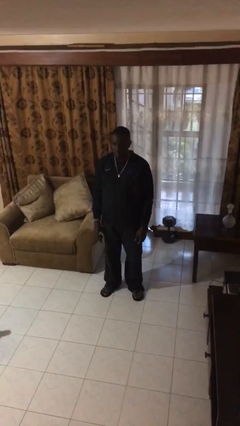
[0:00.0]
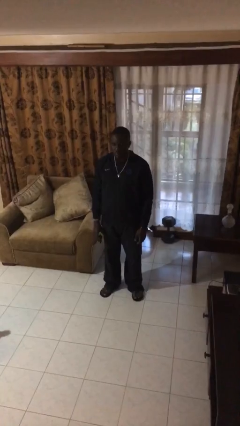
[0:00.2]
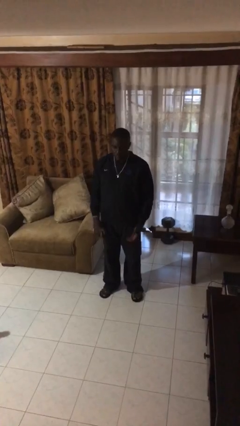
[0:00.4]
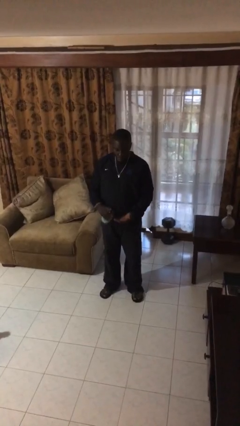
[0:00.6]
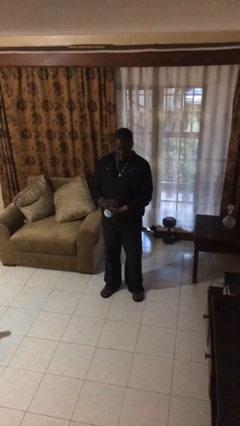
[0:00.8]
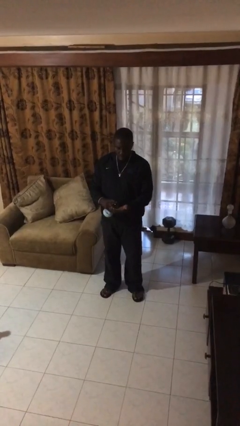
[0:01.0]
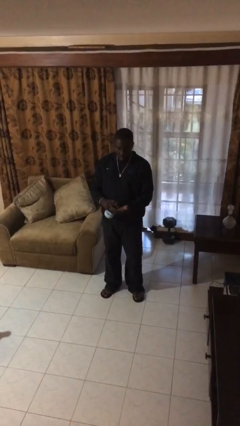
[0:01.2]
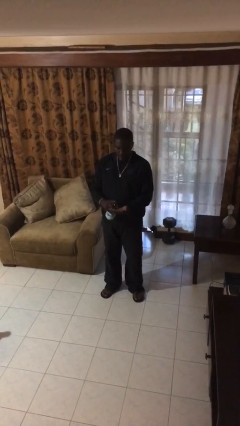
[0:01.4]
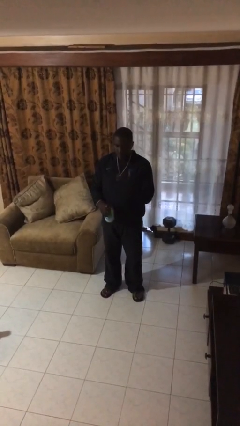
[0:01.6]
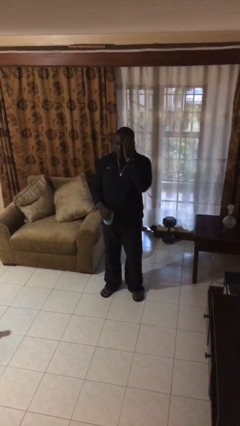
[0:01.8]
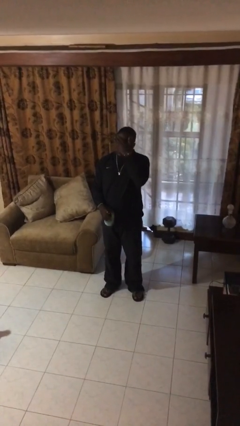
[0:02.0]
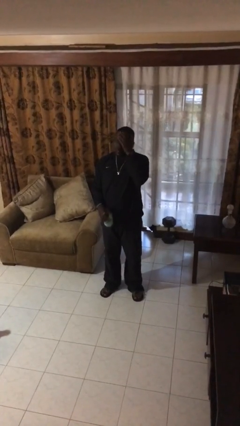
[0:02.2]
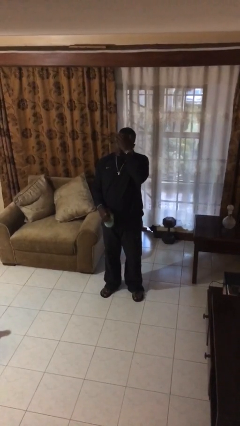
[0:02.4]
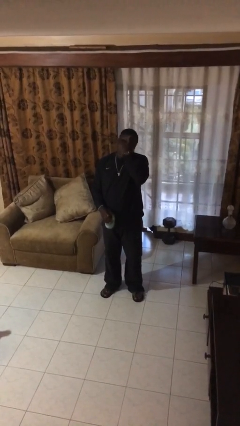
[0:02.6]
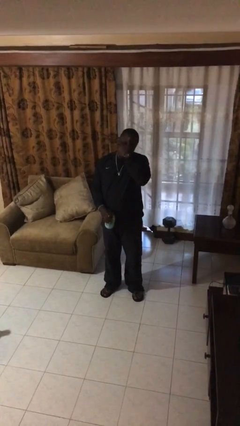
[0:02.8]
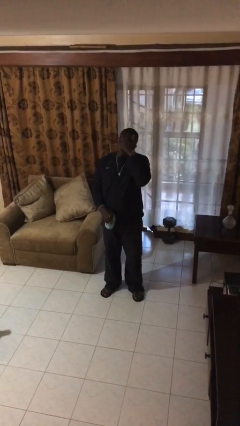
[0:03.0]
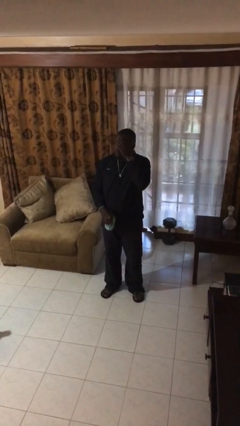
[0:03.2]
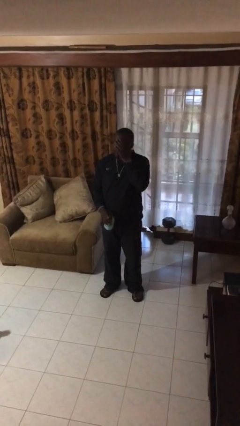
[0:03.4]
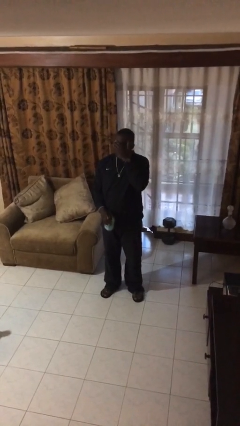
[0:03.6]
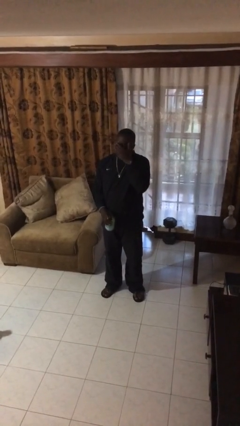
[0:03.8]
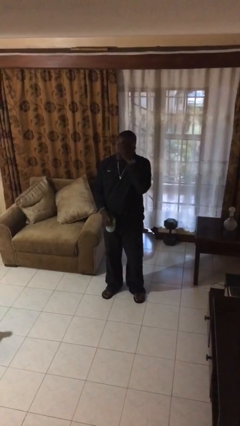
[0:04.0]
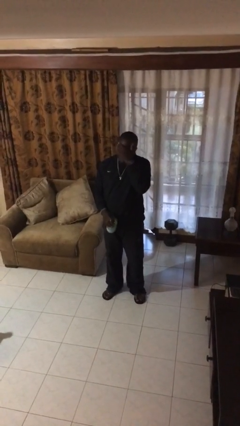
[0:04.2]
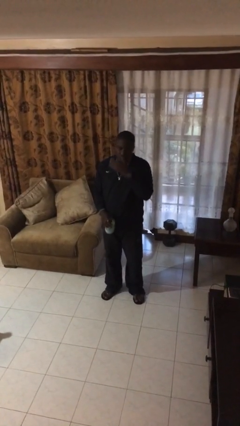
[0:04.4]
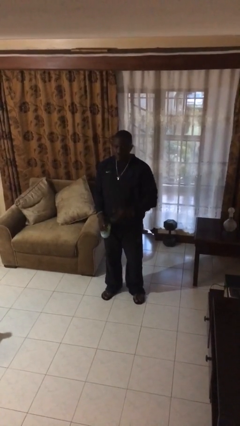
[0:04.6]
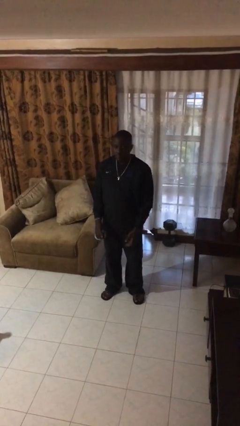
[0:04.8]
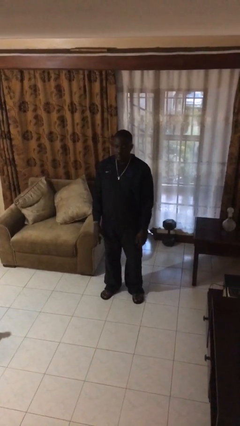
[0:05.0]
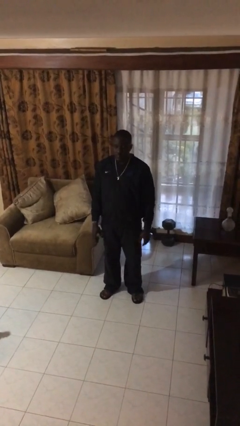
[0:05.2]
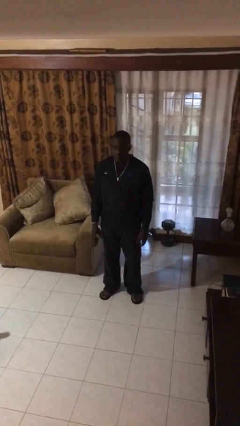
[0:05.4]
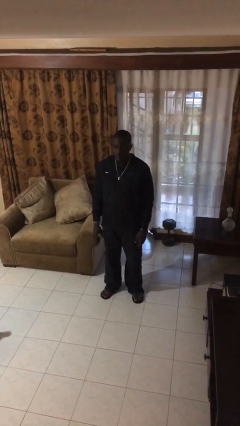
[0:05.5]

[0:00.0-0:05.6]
person applies facial moisturizer

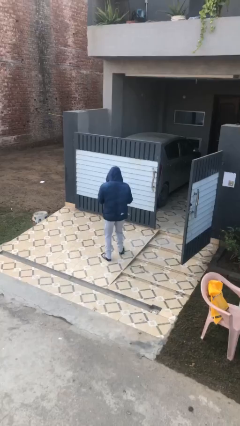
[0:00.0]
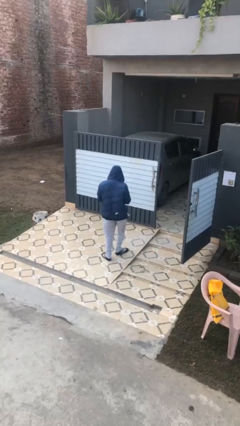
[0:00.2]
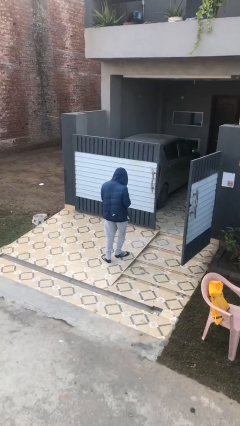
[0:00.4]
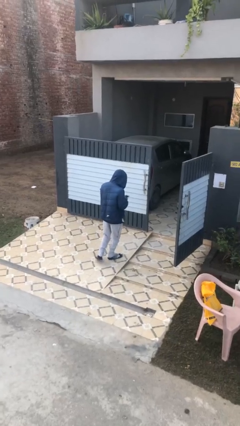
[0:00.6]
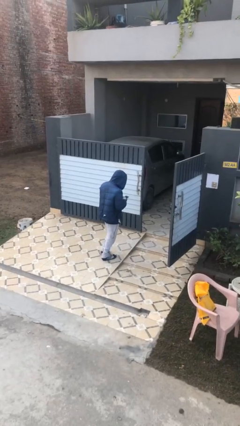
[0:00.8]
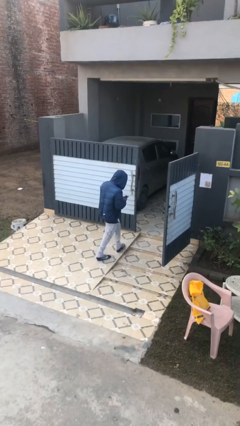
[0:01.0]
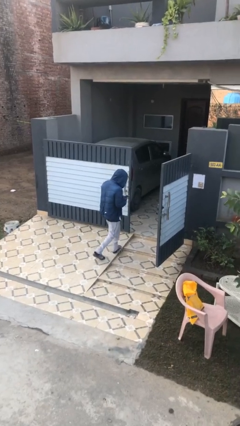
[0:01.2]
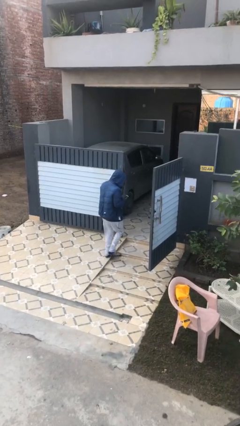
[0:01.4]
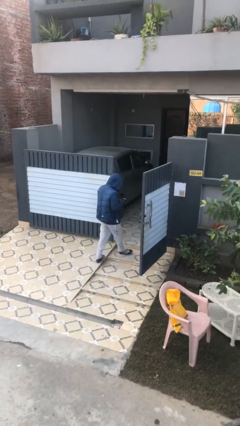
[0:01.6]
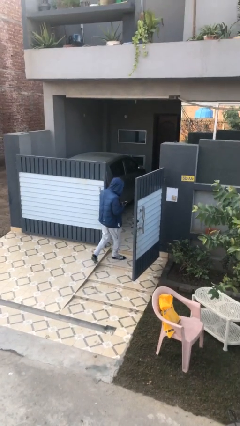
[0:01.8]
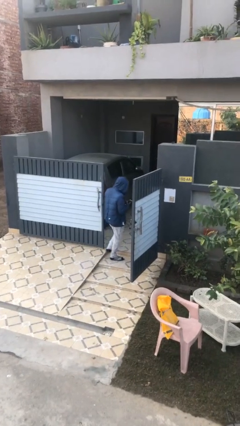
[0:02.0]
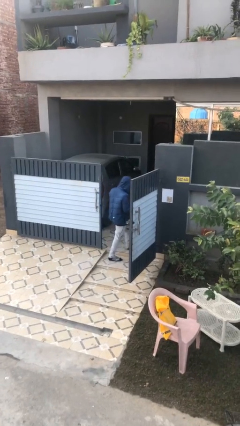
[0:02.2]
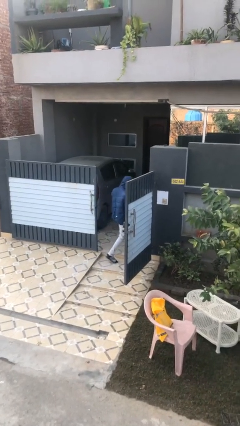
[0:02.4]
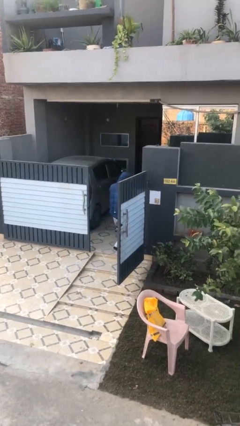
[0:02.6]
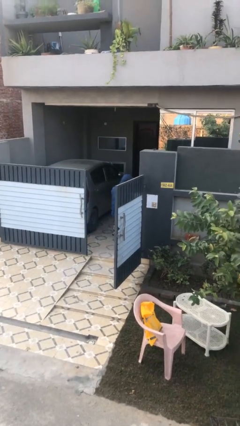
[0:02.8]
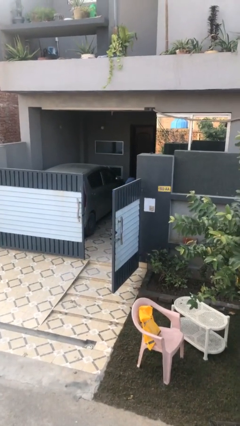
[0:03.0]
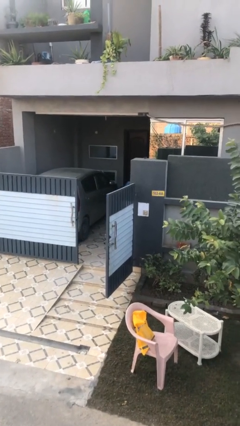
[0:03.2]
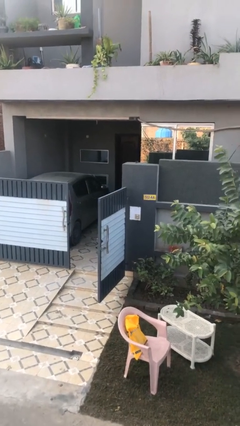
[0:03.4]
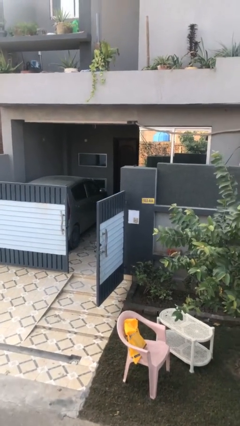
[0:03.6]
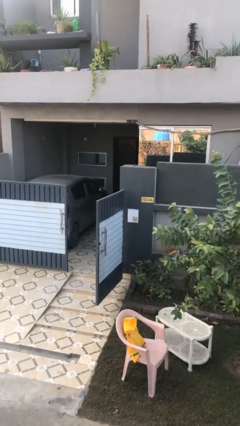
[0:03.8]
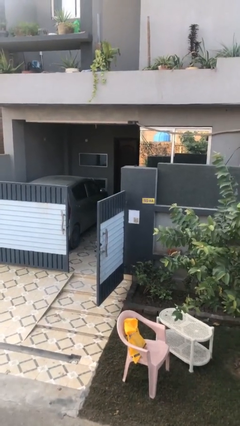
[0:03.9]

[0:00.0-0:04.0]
person exits scene through structure

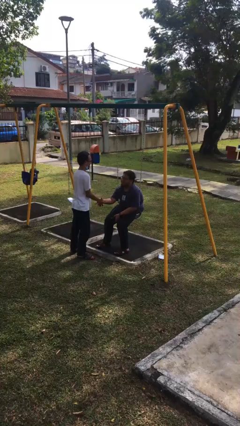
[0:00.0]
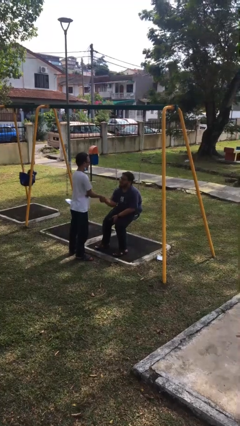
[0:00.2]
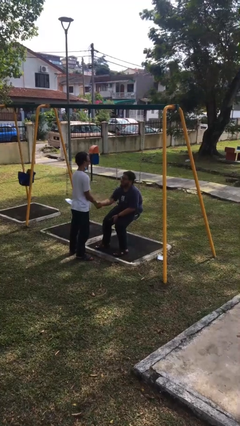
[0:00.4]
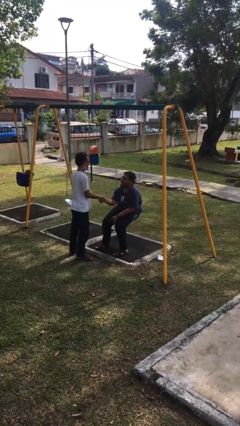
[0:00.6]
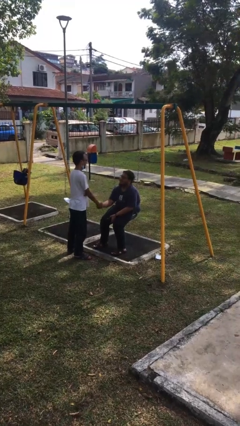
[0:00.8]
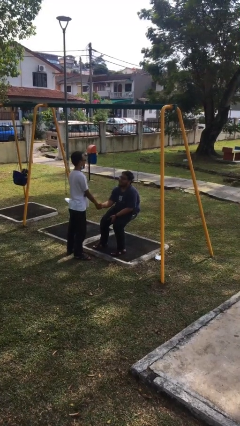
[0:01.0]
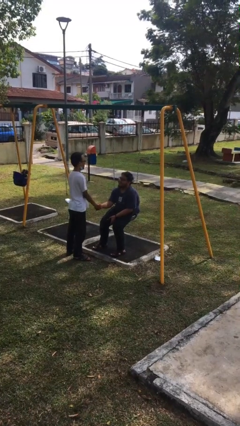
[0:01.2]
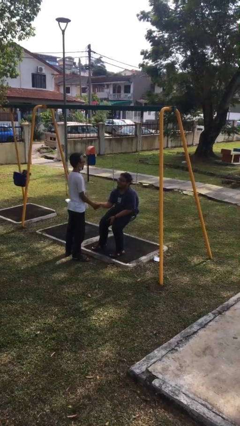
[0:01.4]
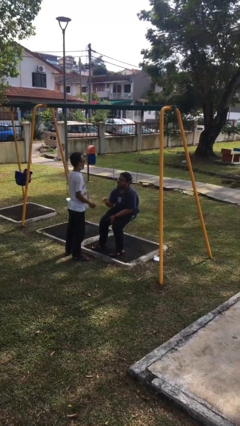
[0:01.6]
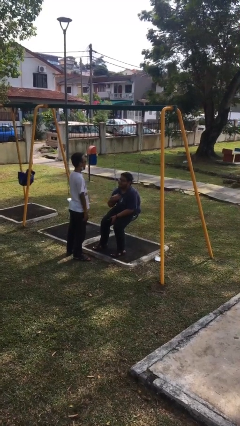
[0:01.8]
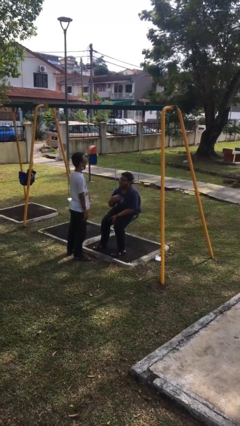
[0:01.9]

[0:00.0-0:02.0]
person shakes hand

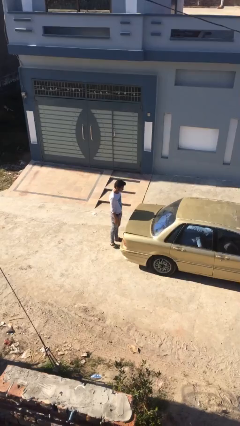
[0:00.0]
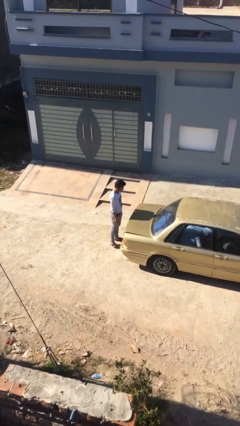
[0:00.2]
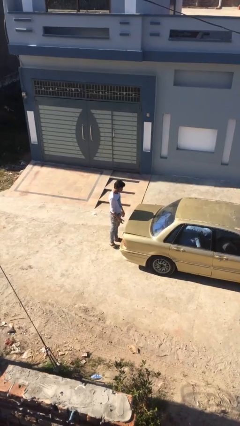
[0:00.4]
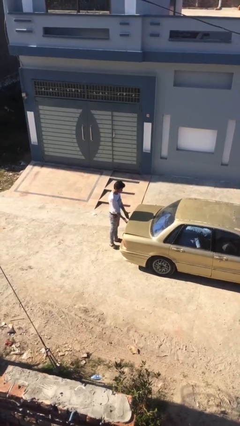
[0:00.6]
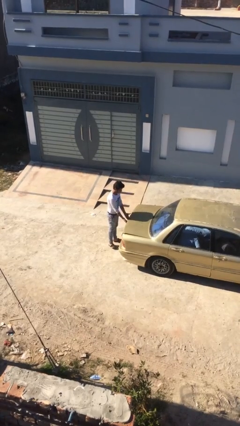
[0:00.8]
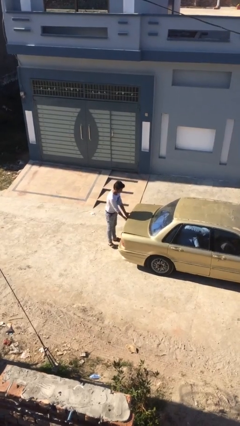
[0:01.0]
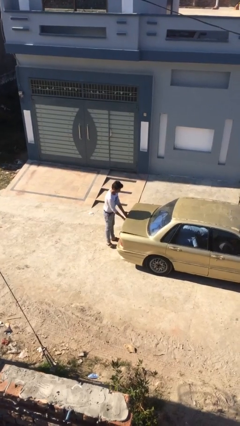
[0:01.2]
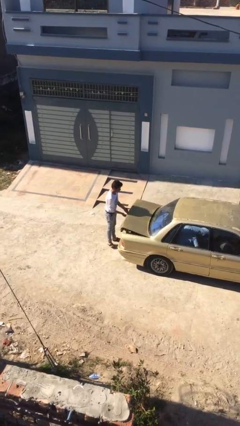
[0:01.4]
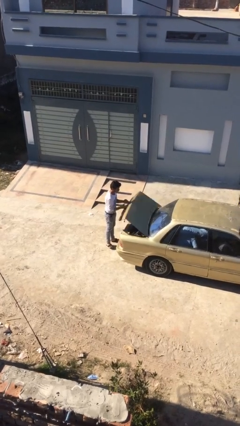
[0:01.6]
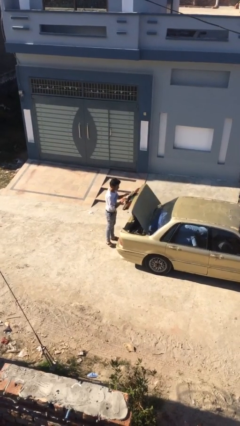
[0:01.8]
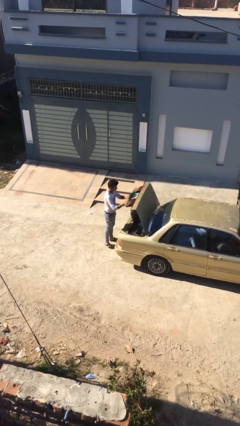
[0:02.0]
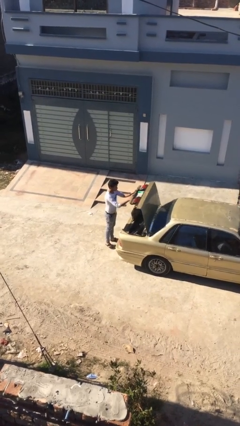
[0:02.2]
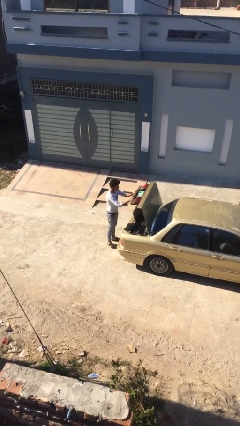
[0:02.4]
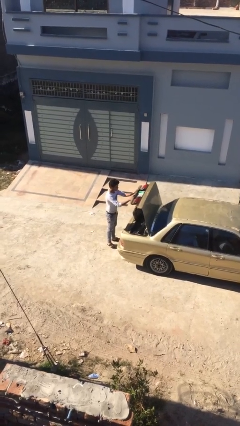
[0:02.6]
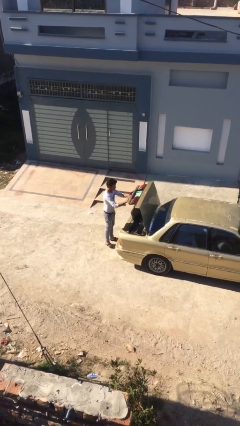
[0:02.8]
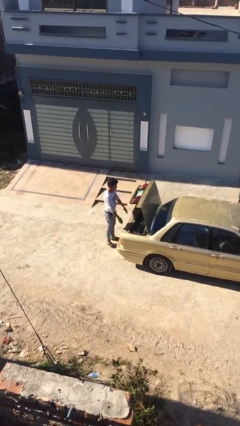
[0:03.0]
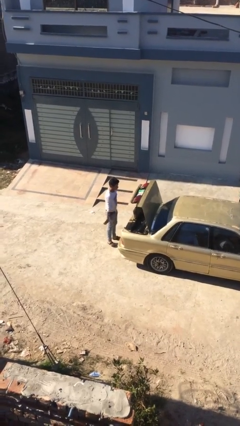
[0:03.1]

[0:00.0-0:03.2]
person opens car trunk

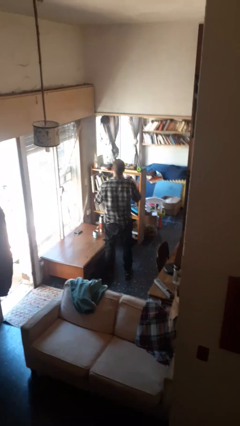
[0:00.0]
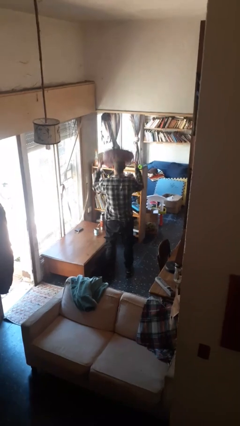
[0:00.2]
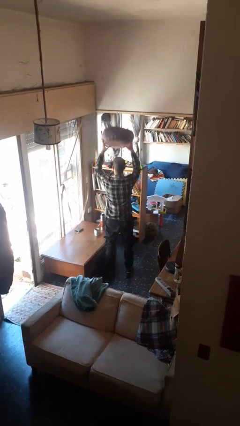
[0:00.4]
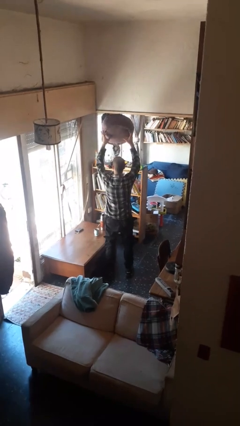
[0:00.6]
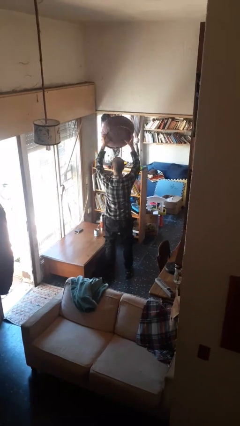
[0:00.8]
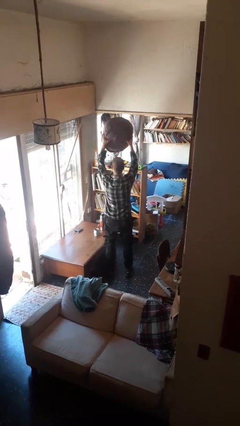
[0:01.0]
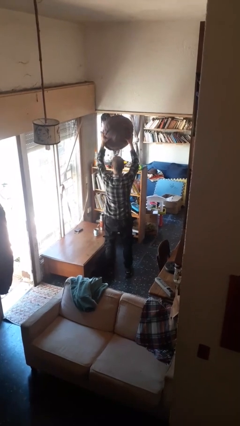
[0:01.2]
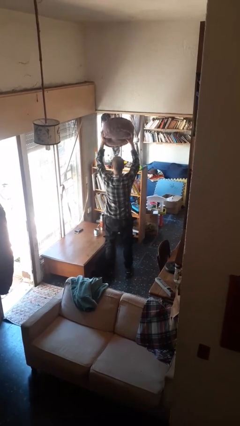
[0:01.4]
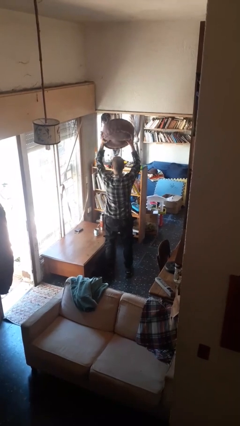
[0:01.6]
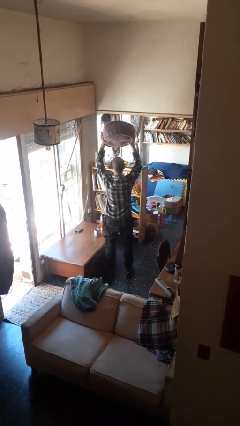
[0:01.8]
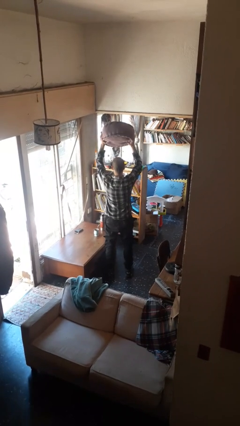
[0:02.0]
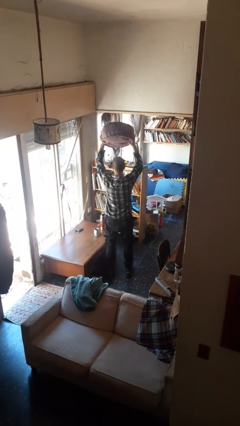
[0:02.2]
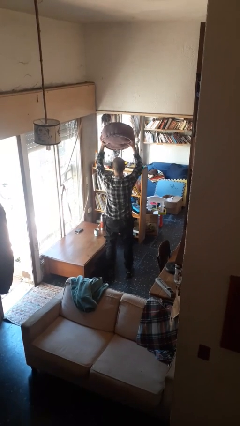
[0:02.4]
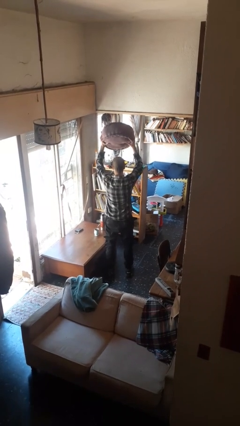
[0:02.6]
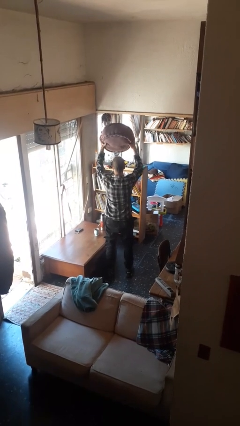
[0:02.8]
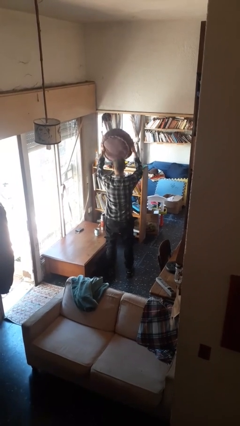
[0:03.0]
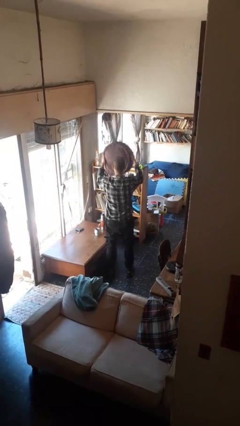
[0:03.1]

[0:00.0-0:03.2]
person holds object above head
